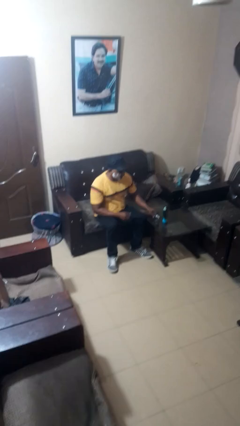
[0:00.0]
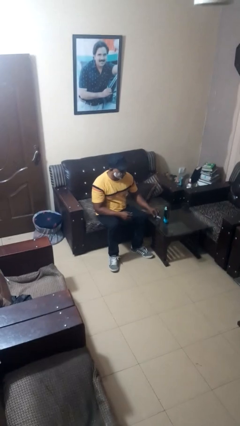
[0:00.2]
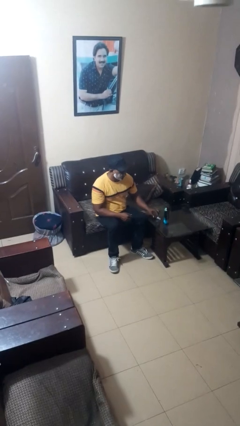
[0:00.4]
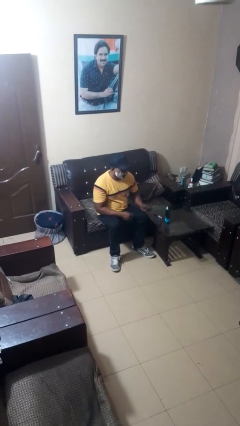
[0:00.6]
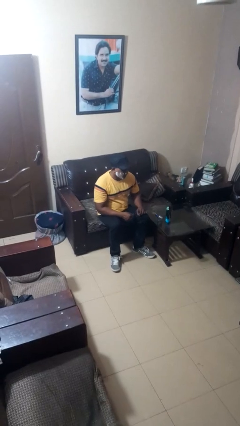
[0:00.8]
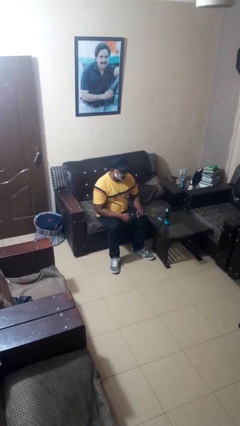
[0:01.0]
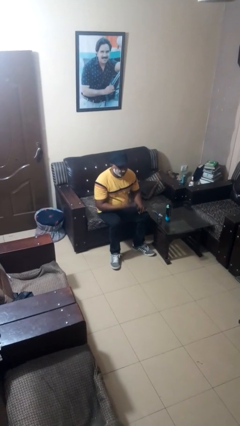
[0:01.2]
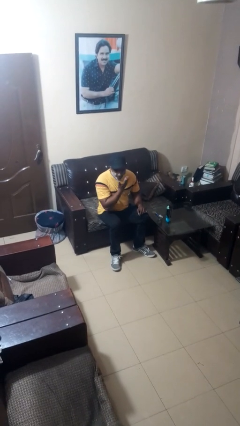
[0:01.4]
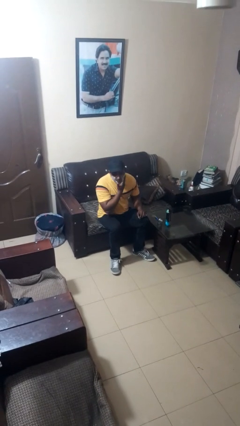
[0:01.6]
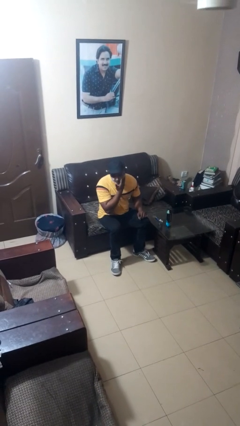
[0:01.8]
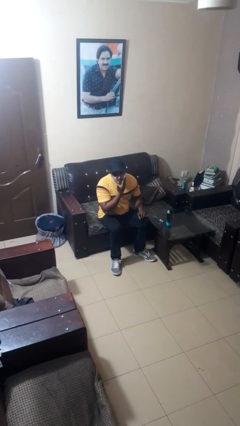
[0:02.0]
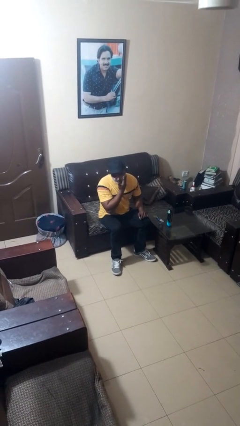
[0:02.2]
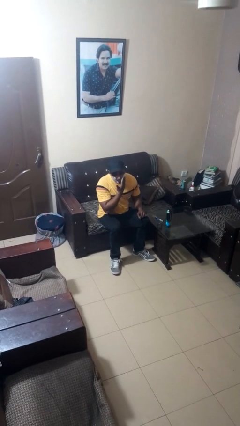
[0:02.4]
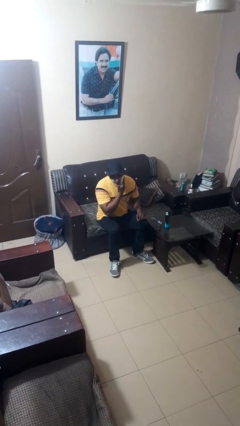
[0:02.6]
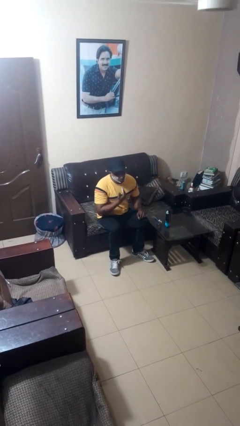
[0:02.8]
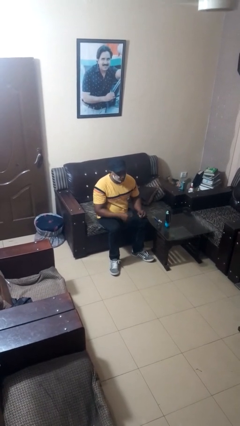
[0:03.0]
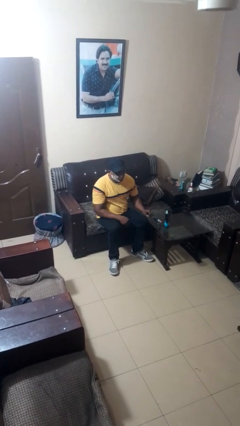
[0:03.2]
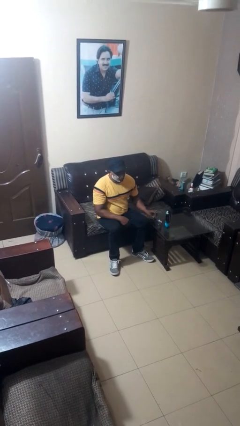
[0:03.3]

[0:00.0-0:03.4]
person applies shaving cream

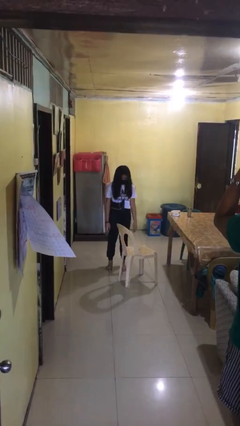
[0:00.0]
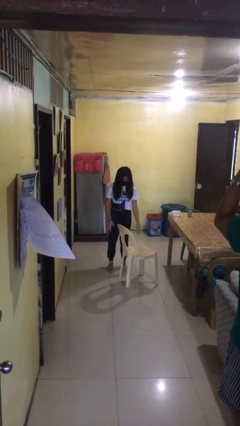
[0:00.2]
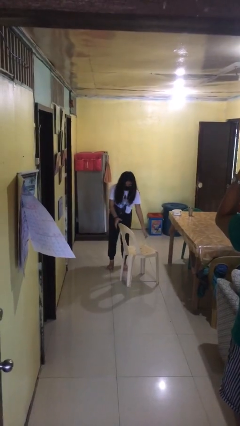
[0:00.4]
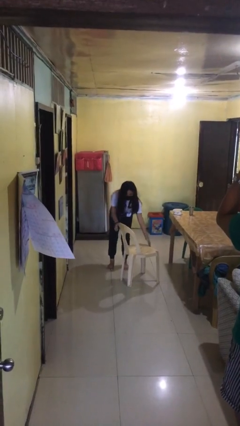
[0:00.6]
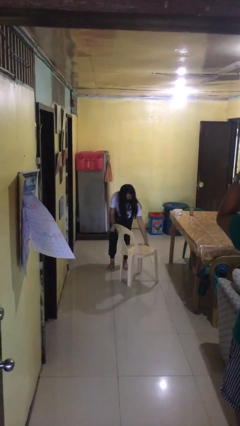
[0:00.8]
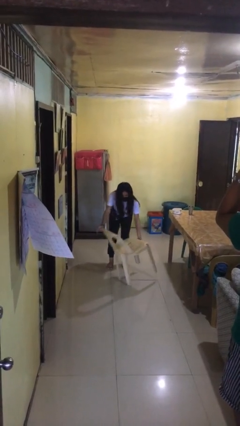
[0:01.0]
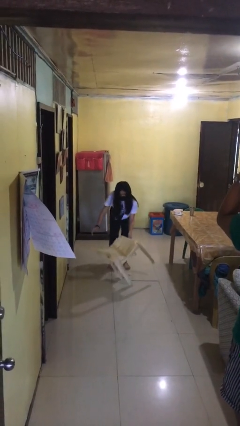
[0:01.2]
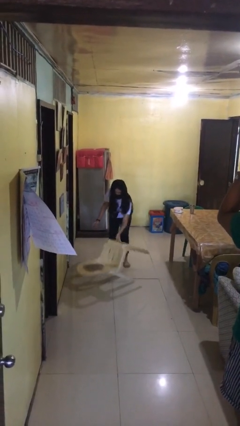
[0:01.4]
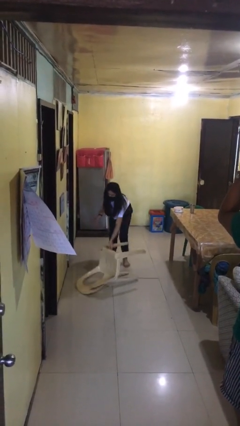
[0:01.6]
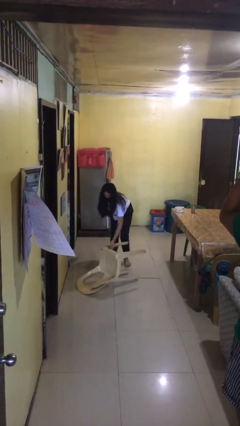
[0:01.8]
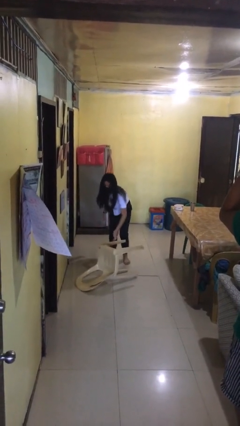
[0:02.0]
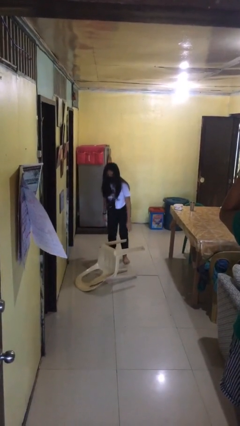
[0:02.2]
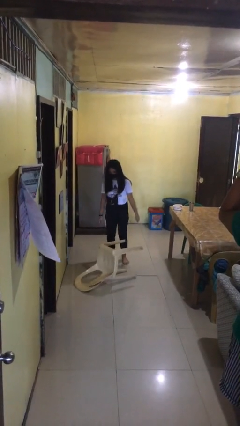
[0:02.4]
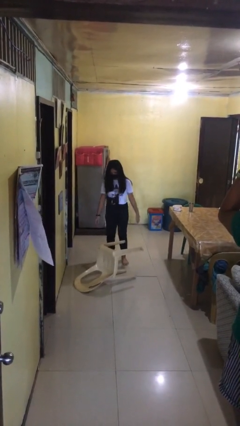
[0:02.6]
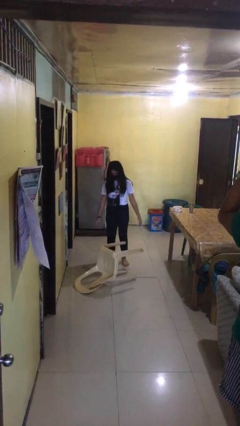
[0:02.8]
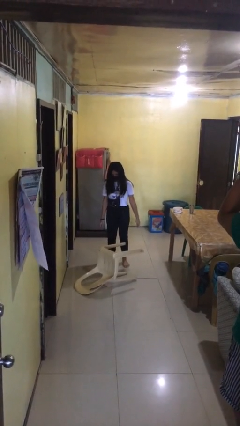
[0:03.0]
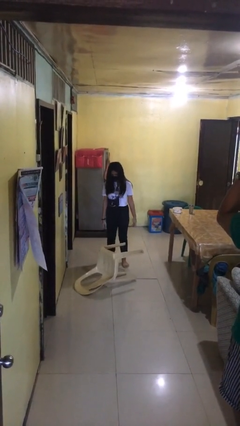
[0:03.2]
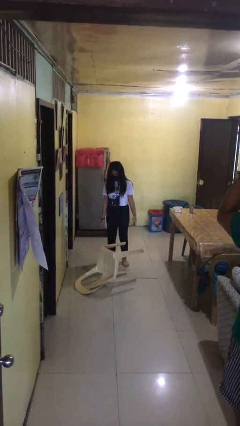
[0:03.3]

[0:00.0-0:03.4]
person knocks over furniture

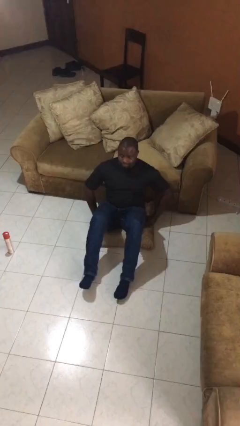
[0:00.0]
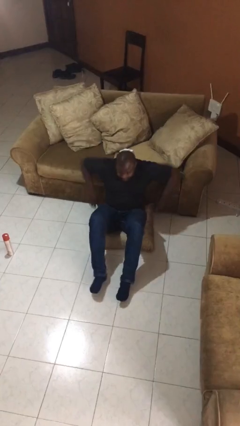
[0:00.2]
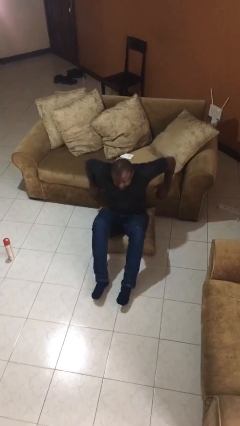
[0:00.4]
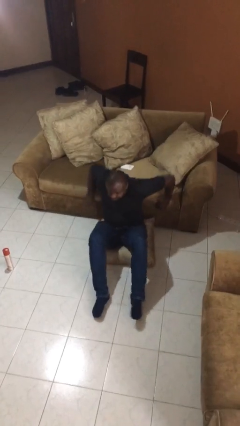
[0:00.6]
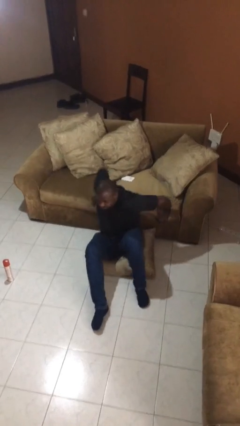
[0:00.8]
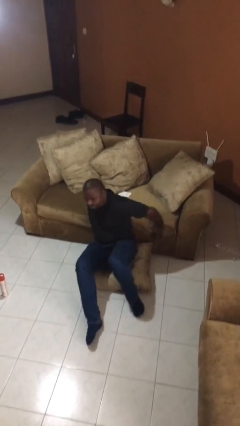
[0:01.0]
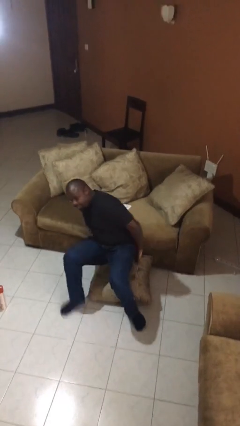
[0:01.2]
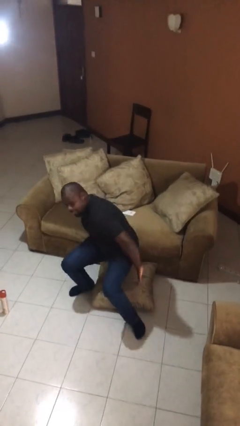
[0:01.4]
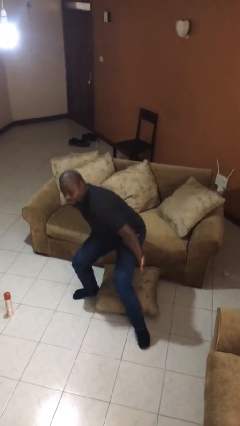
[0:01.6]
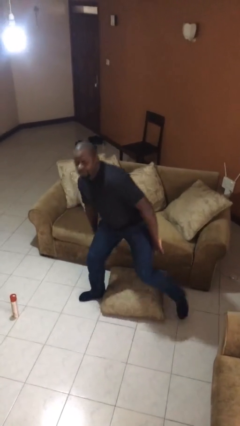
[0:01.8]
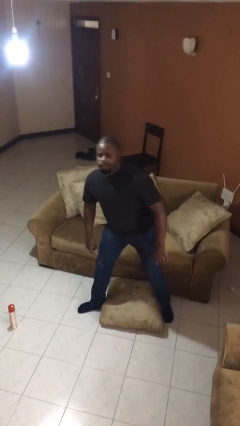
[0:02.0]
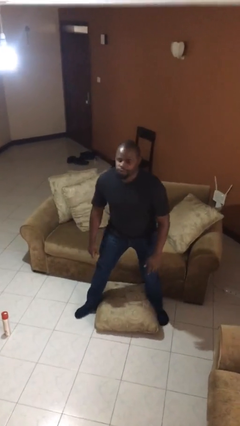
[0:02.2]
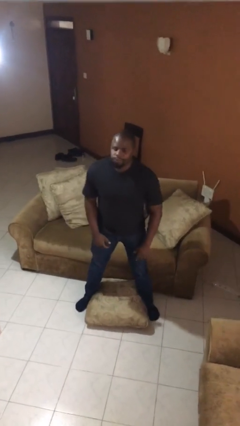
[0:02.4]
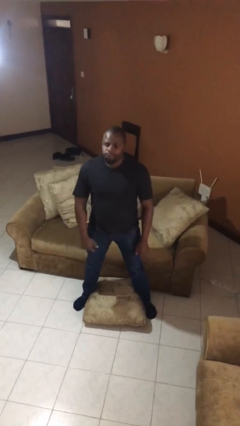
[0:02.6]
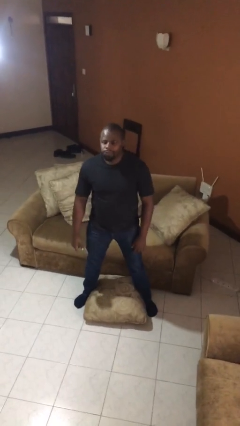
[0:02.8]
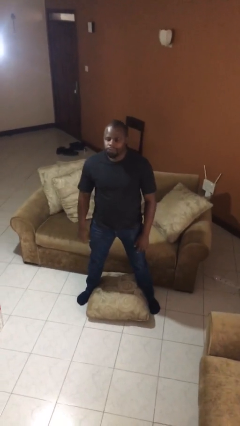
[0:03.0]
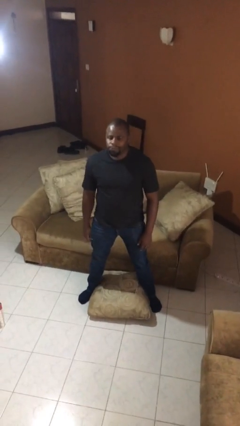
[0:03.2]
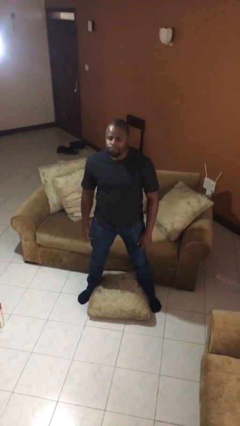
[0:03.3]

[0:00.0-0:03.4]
person stands up from floor

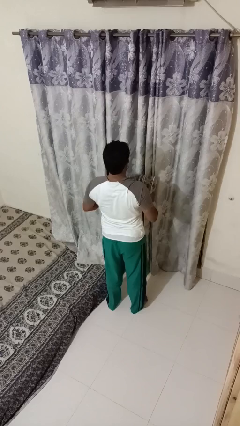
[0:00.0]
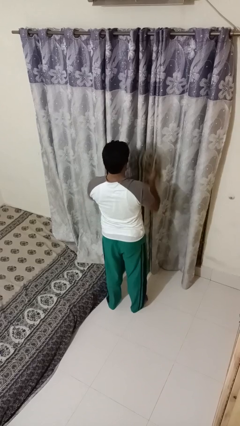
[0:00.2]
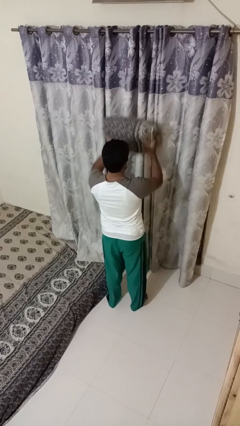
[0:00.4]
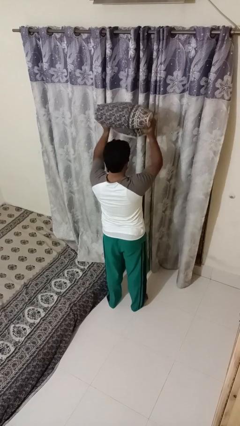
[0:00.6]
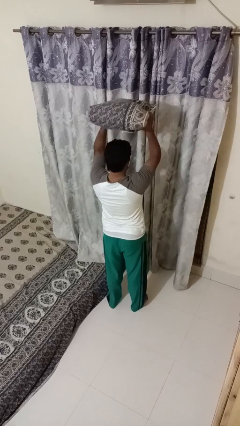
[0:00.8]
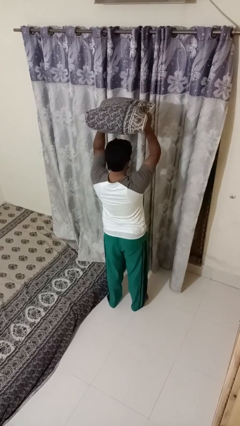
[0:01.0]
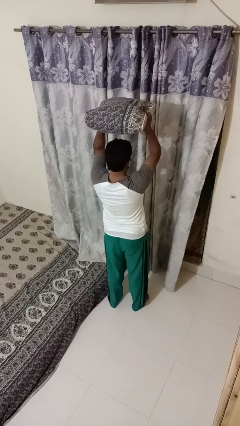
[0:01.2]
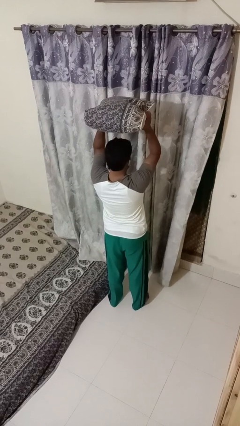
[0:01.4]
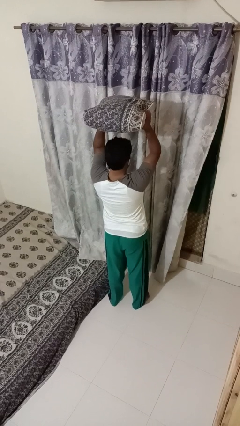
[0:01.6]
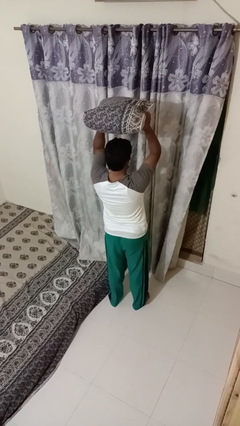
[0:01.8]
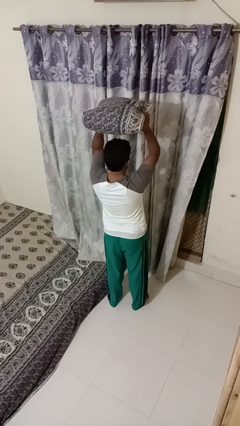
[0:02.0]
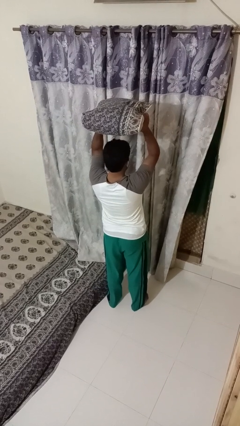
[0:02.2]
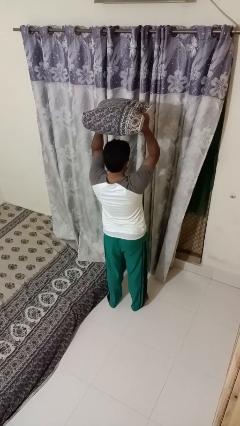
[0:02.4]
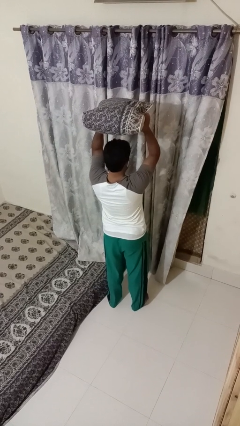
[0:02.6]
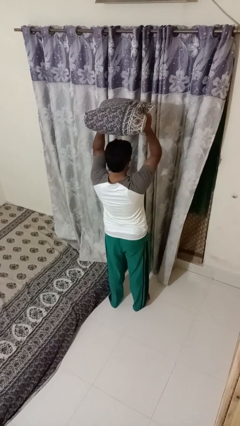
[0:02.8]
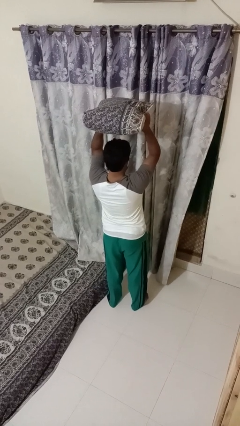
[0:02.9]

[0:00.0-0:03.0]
person holds object above head

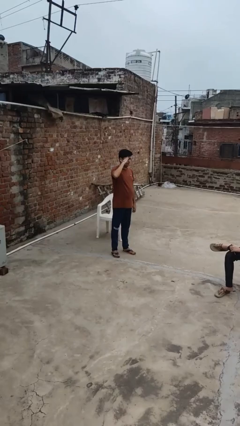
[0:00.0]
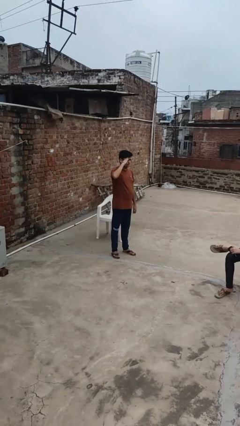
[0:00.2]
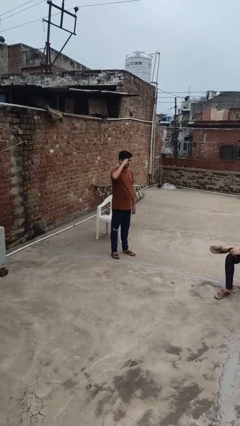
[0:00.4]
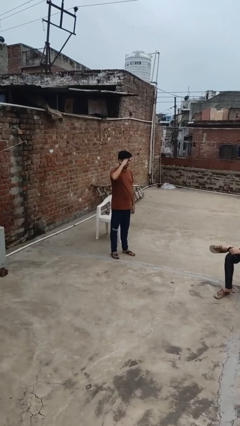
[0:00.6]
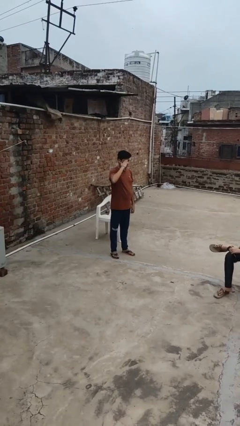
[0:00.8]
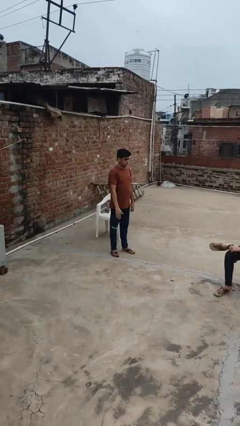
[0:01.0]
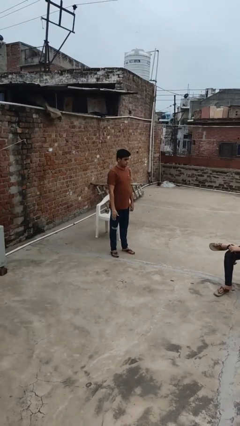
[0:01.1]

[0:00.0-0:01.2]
person salutes

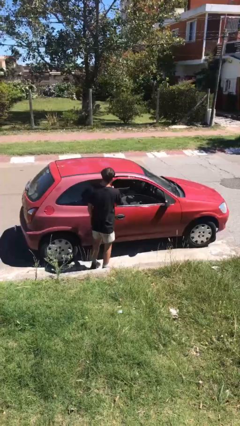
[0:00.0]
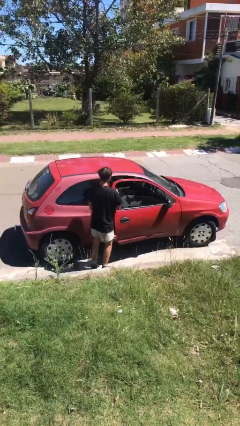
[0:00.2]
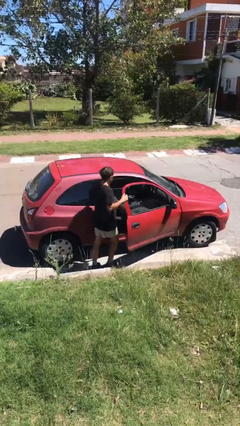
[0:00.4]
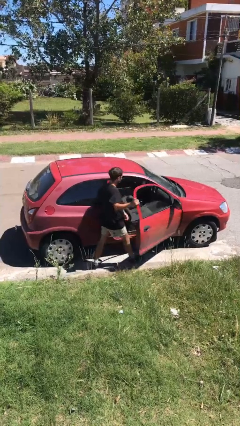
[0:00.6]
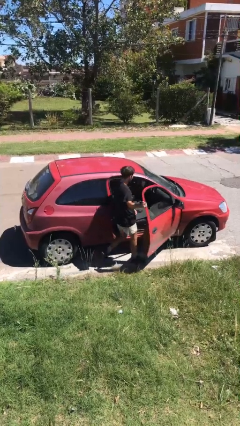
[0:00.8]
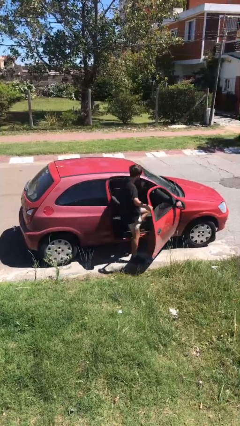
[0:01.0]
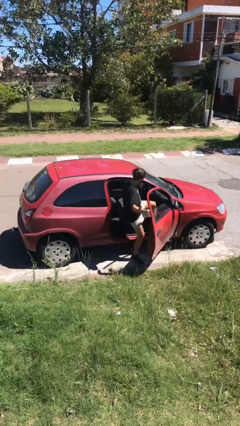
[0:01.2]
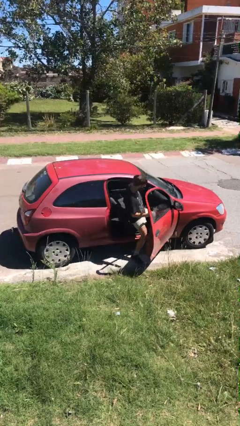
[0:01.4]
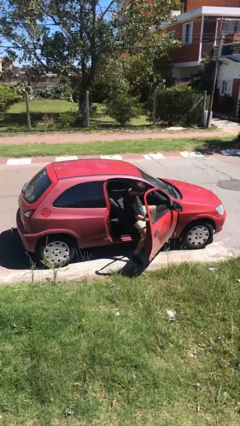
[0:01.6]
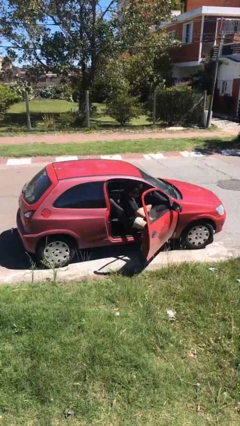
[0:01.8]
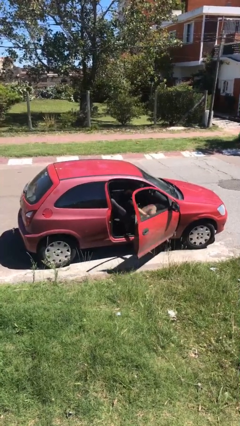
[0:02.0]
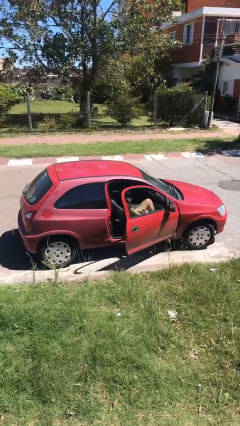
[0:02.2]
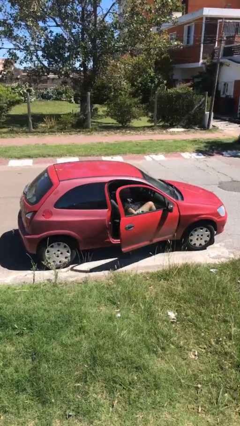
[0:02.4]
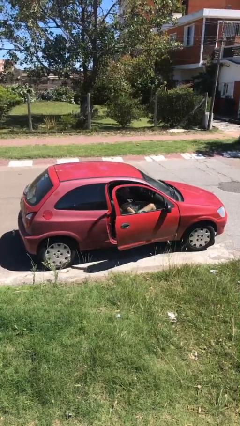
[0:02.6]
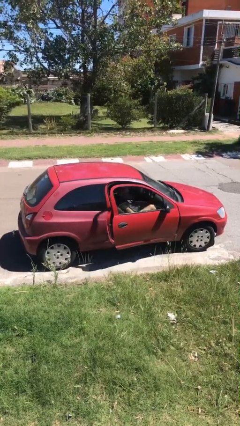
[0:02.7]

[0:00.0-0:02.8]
car picks up person

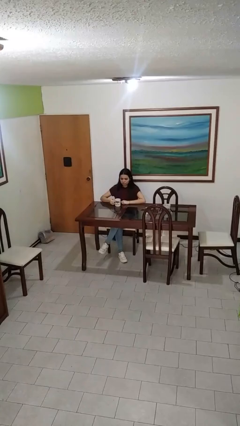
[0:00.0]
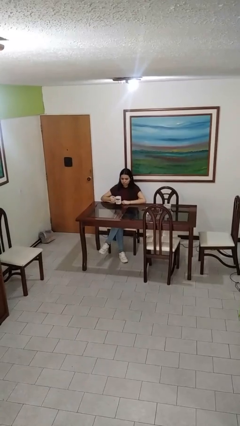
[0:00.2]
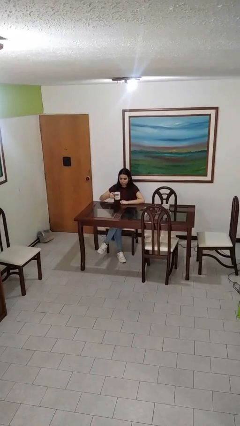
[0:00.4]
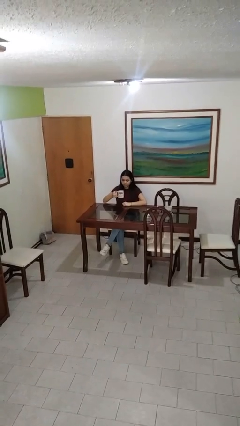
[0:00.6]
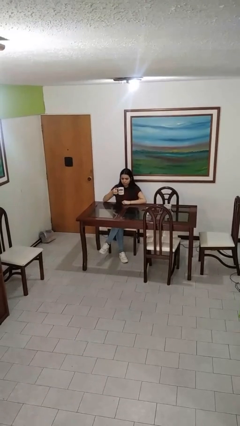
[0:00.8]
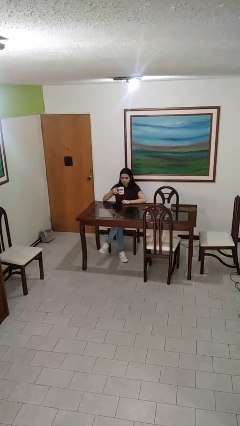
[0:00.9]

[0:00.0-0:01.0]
person picks up object from table
